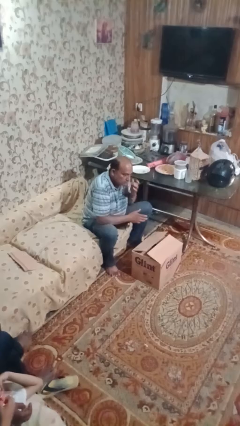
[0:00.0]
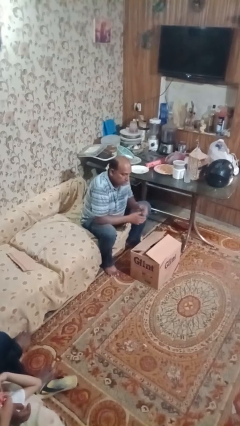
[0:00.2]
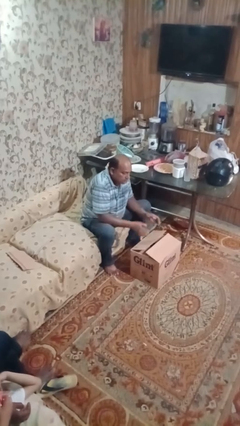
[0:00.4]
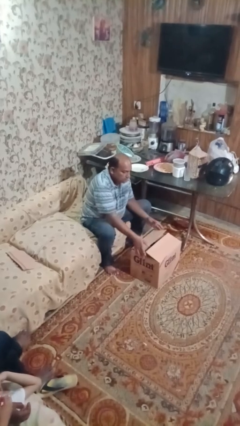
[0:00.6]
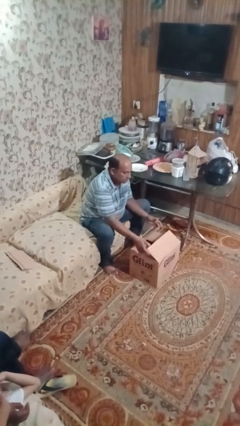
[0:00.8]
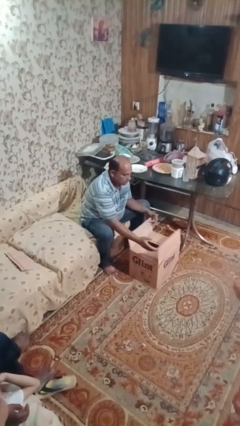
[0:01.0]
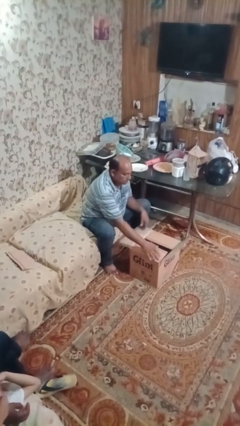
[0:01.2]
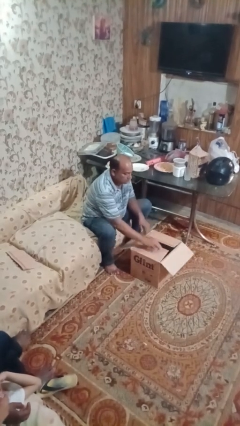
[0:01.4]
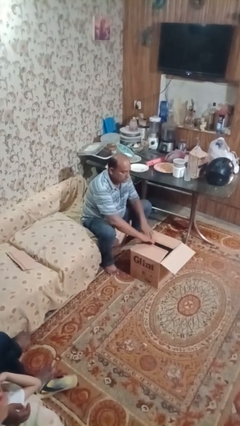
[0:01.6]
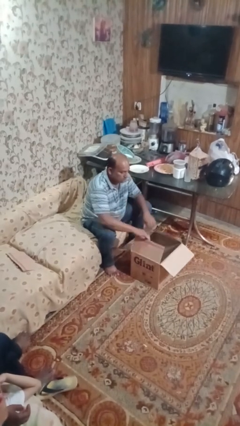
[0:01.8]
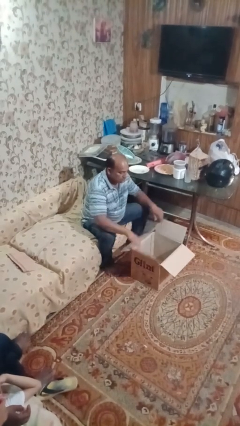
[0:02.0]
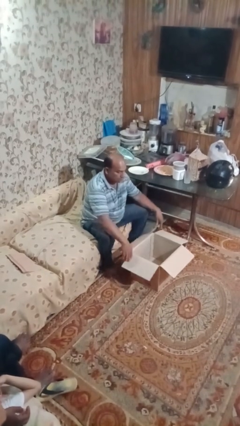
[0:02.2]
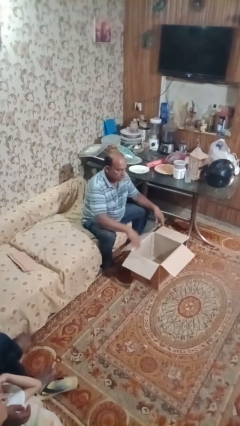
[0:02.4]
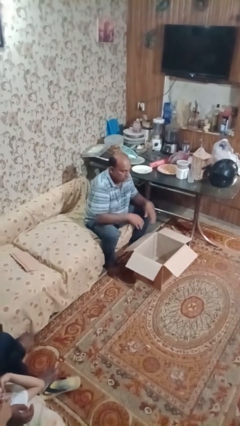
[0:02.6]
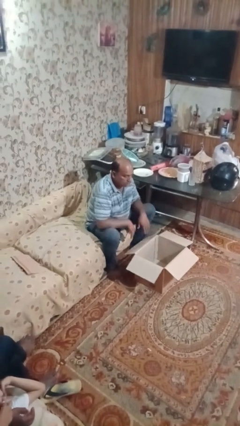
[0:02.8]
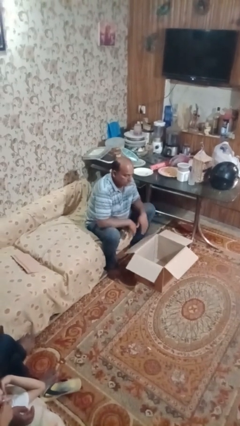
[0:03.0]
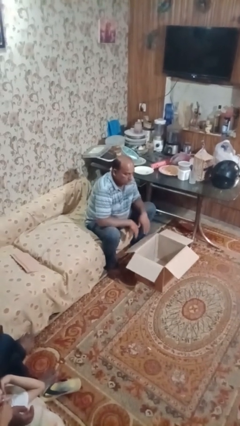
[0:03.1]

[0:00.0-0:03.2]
person opens box

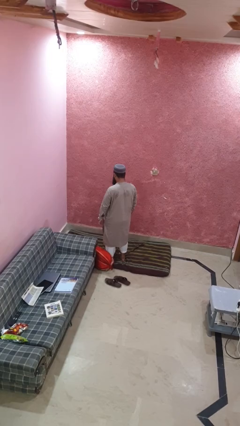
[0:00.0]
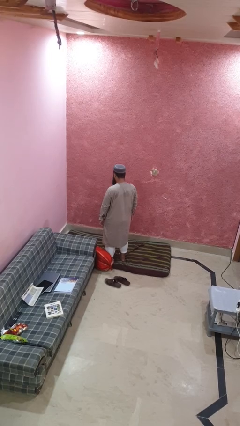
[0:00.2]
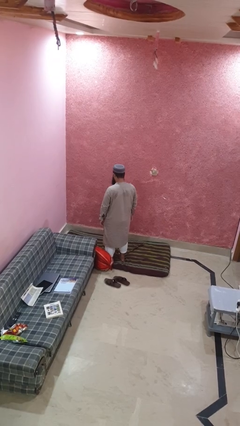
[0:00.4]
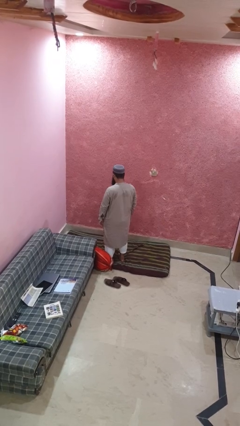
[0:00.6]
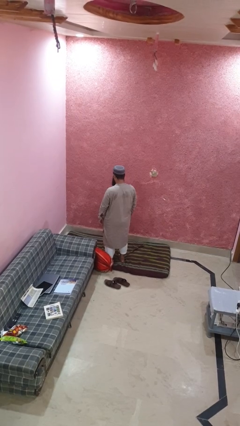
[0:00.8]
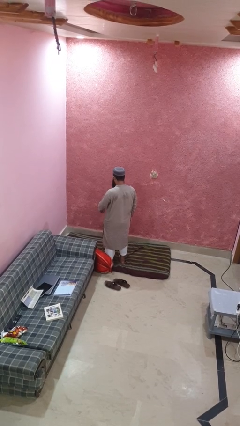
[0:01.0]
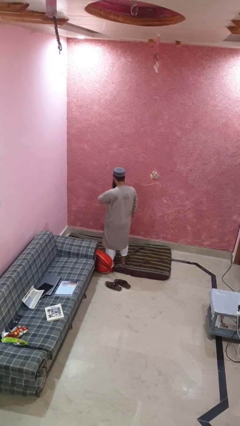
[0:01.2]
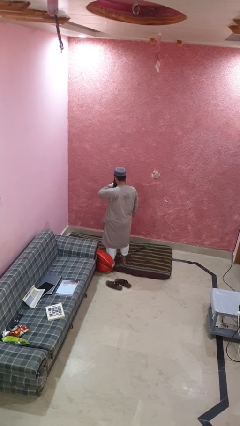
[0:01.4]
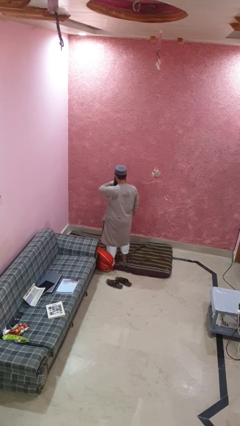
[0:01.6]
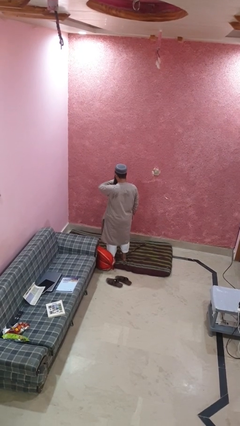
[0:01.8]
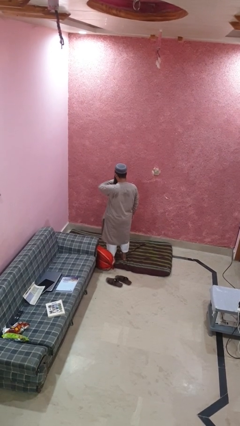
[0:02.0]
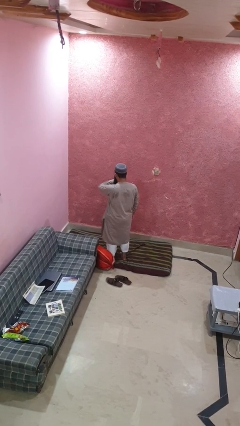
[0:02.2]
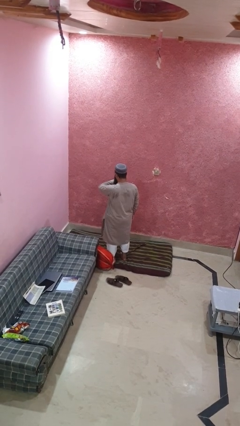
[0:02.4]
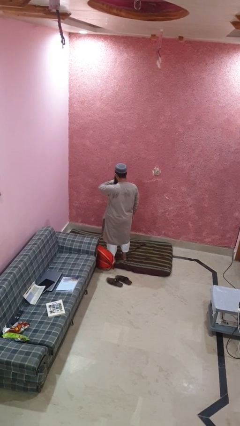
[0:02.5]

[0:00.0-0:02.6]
person looks at wristwatch

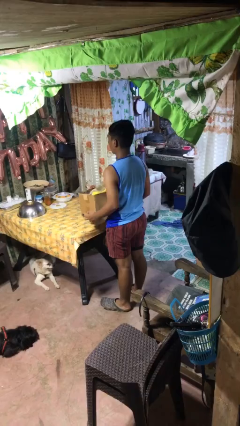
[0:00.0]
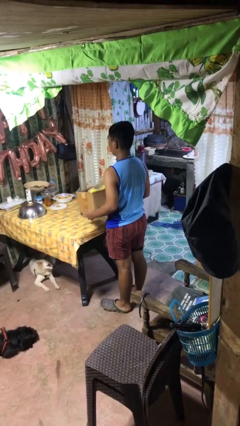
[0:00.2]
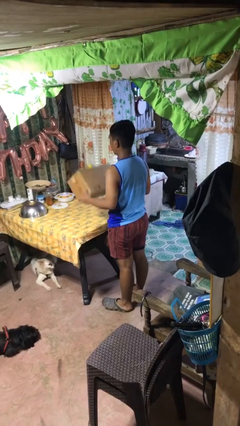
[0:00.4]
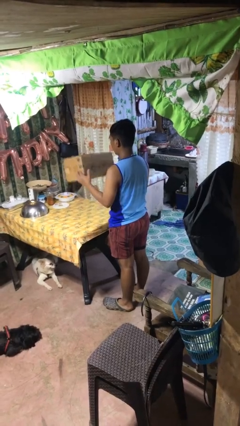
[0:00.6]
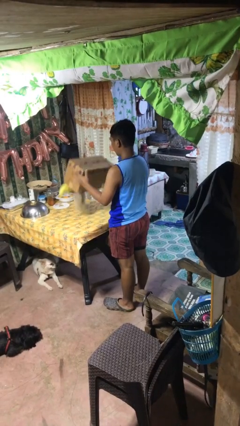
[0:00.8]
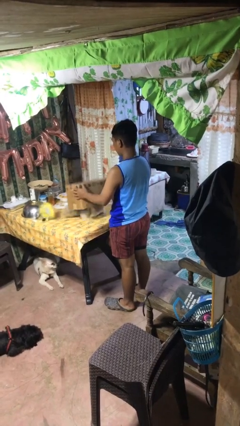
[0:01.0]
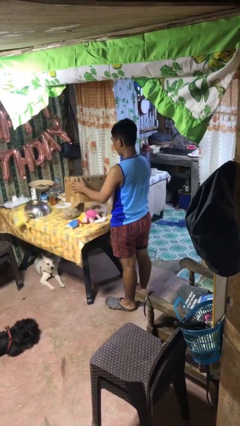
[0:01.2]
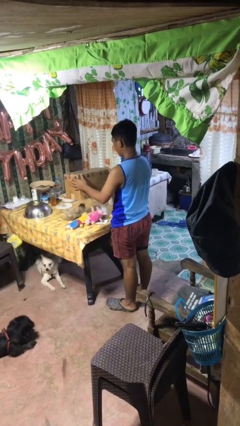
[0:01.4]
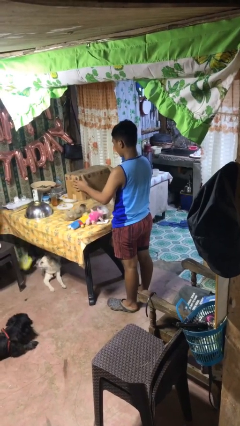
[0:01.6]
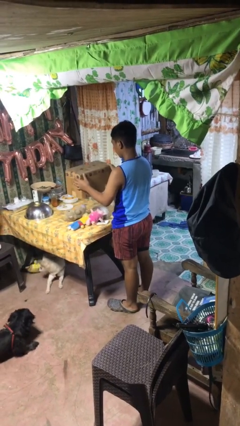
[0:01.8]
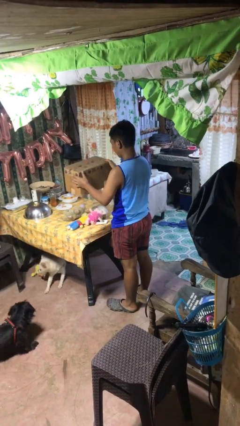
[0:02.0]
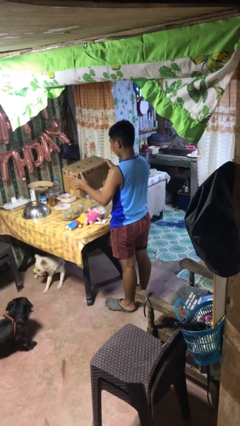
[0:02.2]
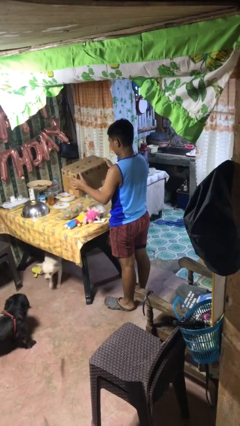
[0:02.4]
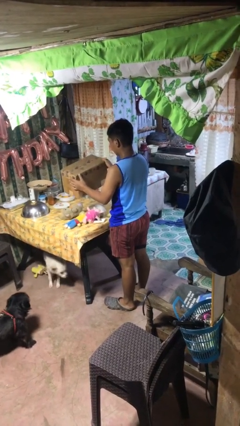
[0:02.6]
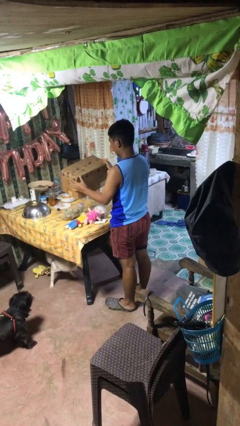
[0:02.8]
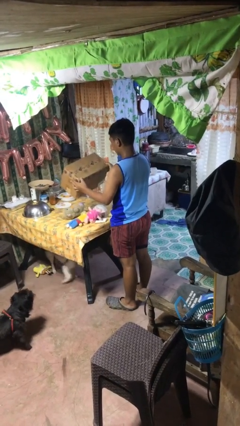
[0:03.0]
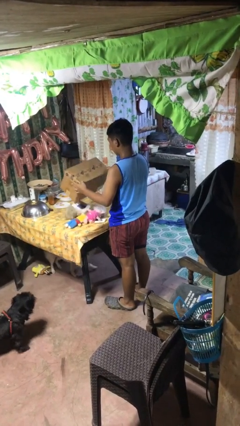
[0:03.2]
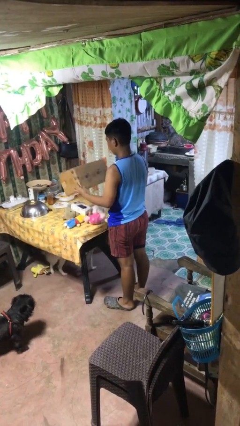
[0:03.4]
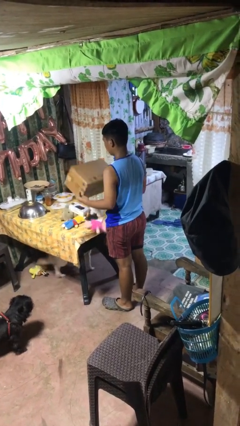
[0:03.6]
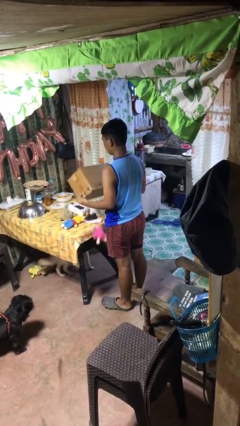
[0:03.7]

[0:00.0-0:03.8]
person unloads box onto table

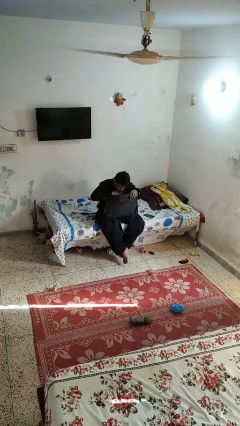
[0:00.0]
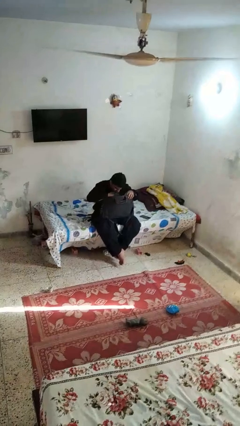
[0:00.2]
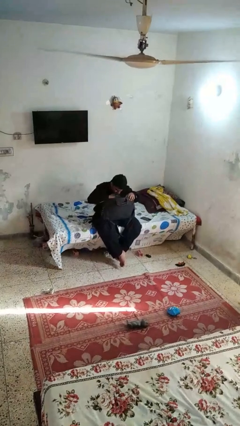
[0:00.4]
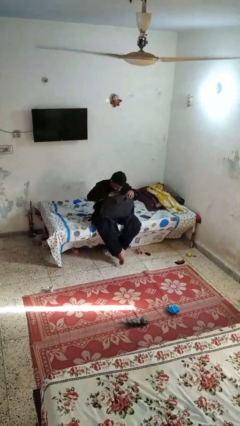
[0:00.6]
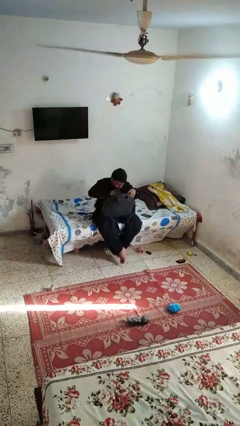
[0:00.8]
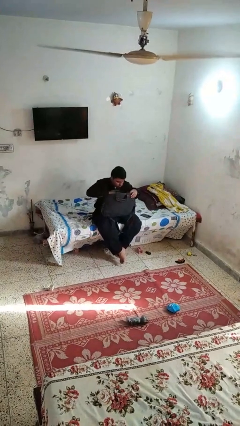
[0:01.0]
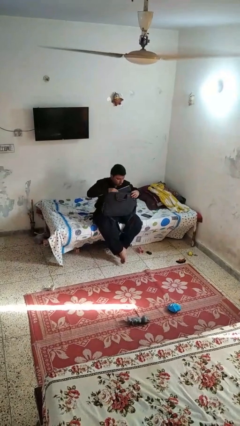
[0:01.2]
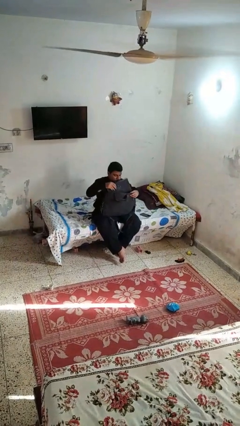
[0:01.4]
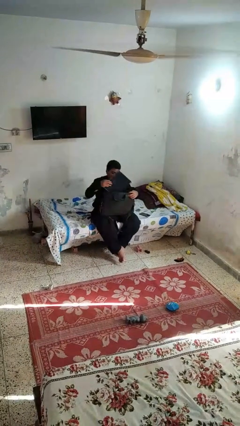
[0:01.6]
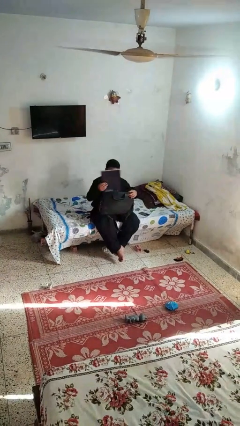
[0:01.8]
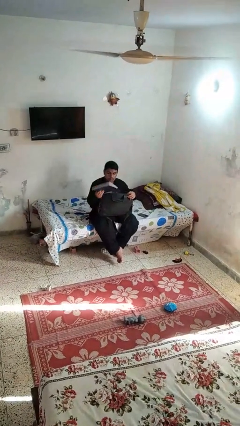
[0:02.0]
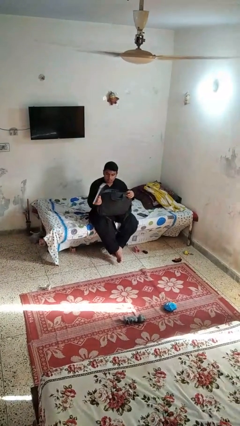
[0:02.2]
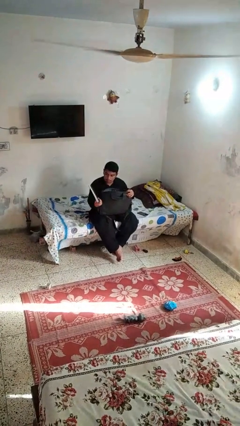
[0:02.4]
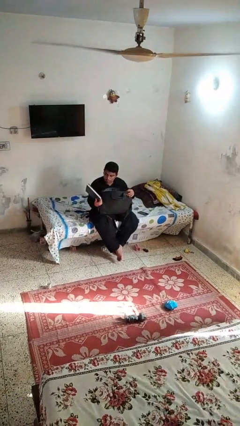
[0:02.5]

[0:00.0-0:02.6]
person takes object from backpack

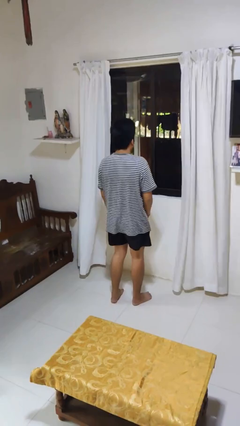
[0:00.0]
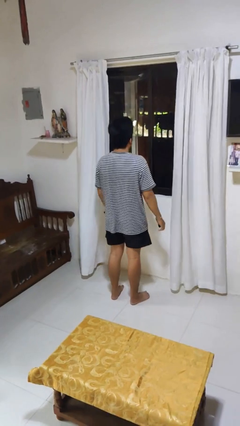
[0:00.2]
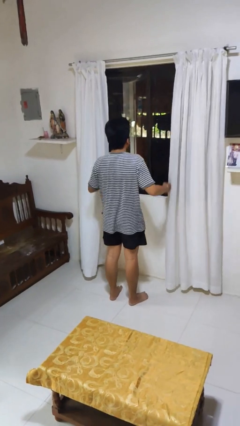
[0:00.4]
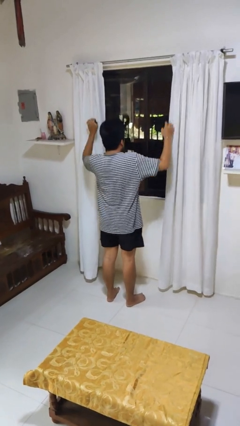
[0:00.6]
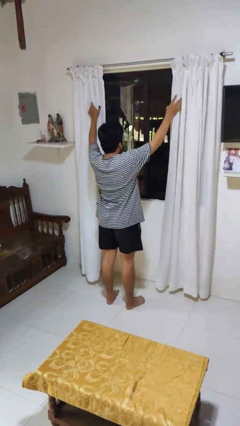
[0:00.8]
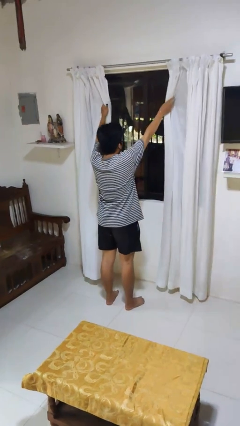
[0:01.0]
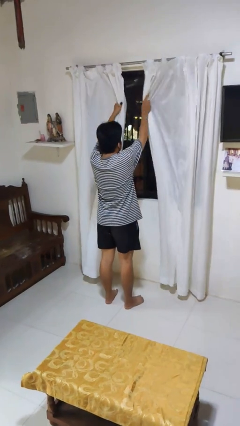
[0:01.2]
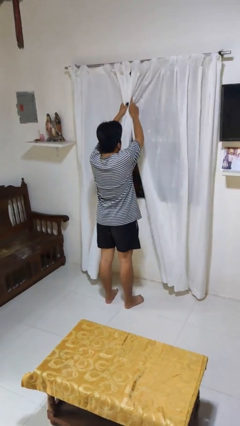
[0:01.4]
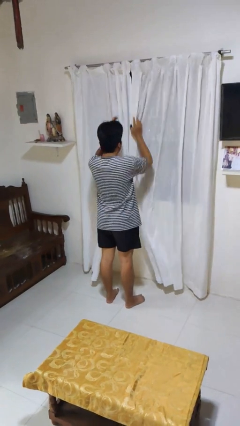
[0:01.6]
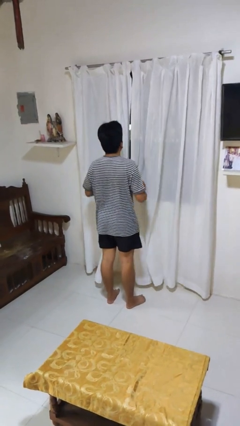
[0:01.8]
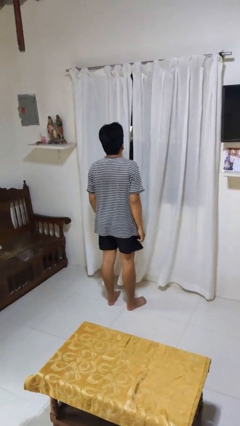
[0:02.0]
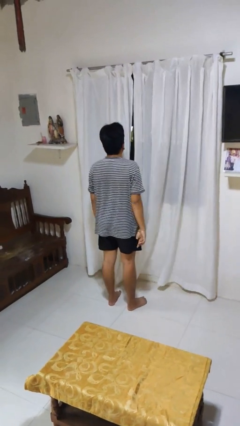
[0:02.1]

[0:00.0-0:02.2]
person closes curtains

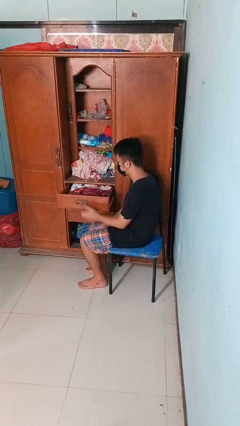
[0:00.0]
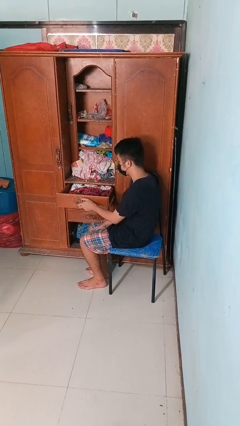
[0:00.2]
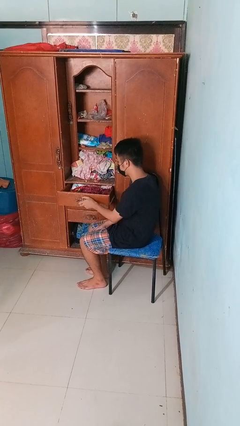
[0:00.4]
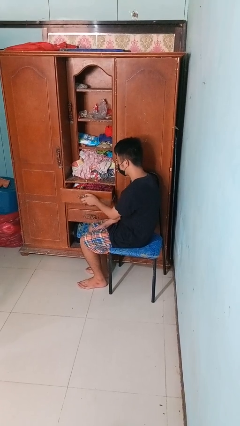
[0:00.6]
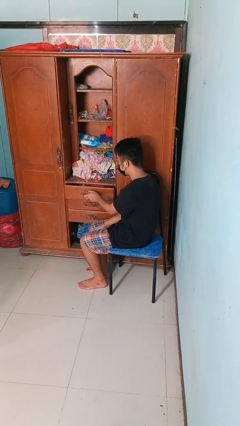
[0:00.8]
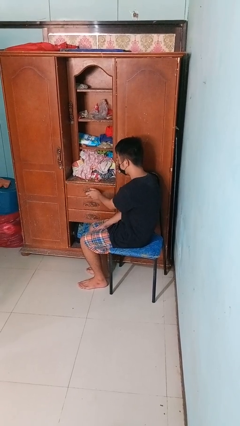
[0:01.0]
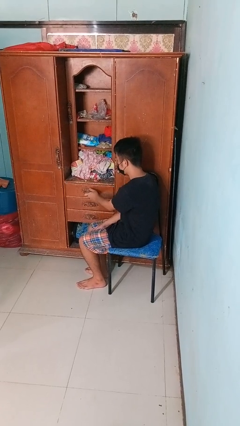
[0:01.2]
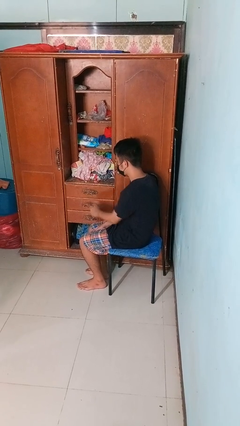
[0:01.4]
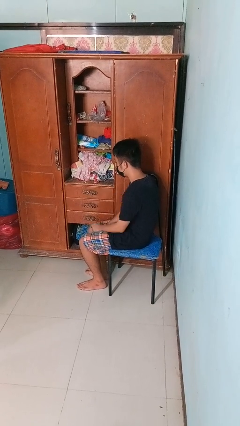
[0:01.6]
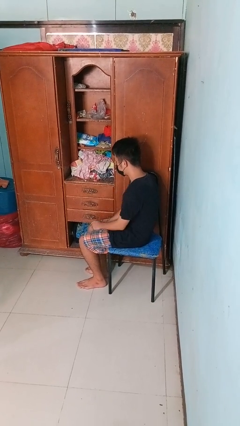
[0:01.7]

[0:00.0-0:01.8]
person closes dresser drawer

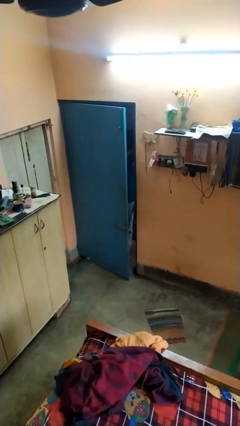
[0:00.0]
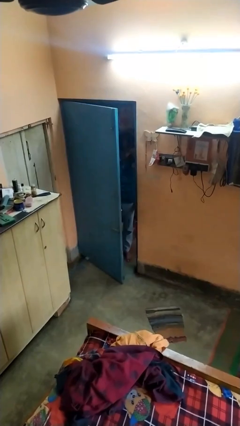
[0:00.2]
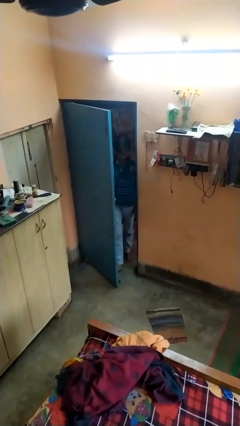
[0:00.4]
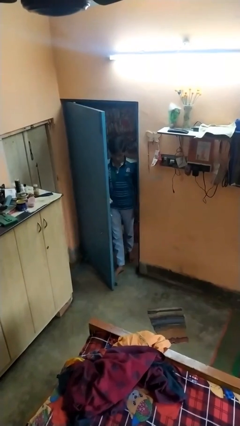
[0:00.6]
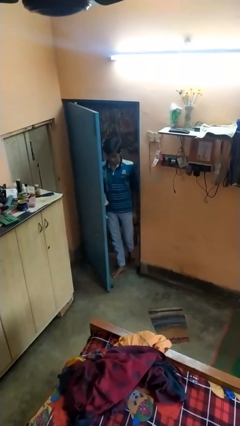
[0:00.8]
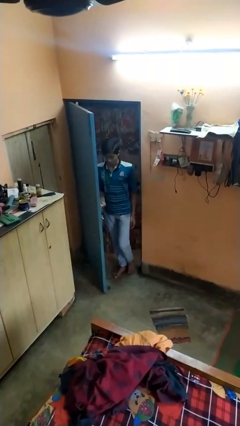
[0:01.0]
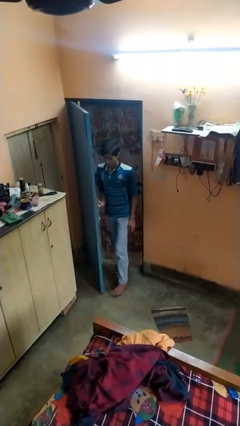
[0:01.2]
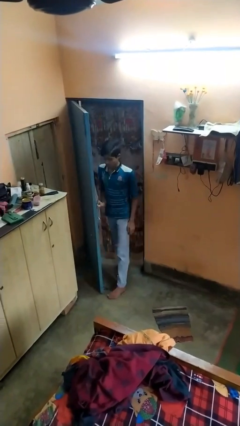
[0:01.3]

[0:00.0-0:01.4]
person opens facility door
